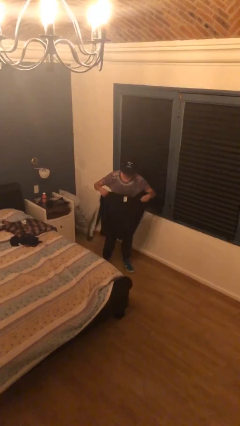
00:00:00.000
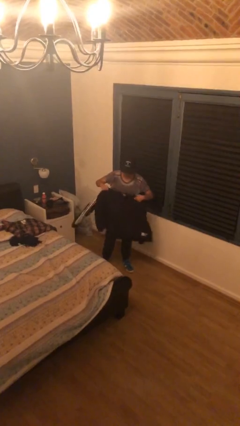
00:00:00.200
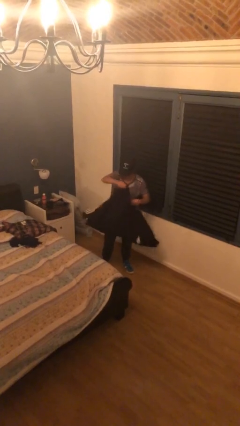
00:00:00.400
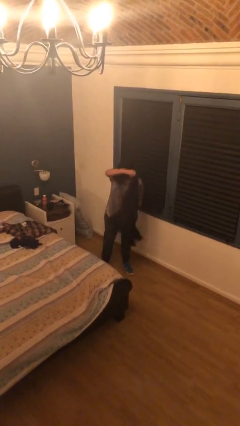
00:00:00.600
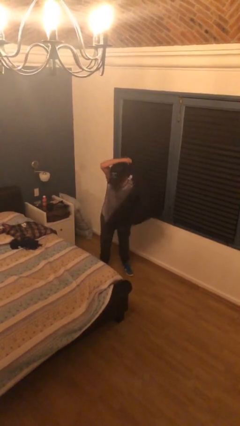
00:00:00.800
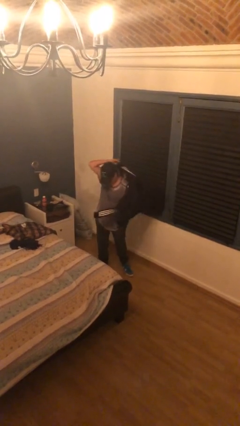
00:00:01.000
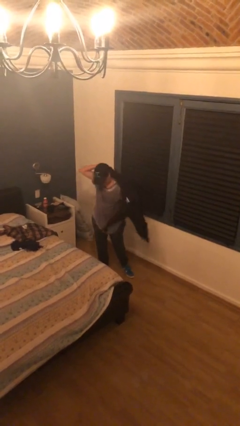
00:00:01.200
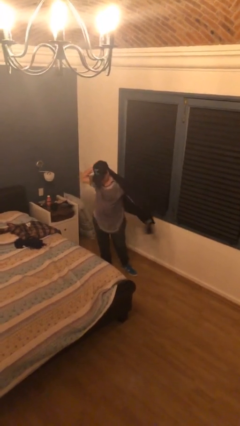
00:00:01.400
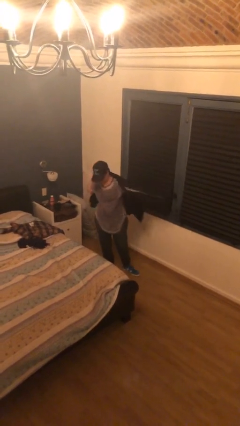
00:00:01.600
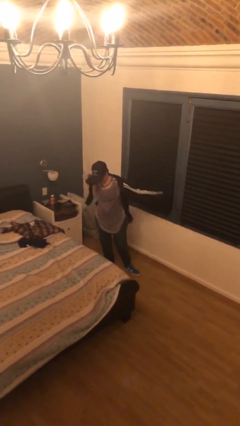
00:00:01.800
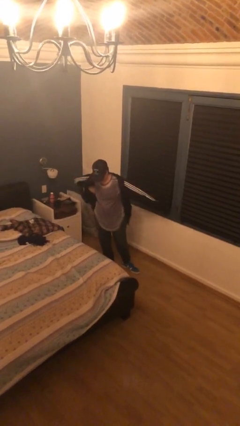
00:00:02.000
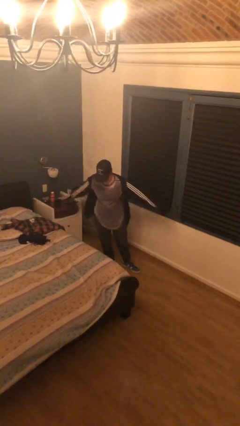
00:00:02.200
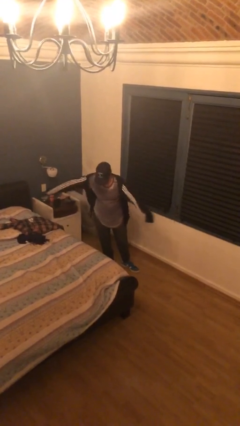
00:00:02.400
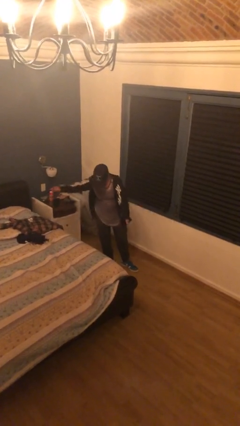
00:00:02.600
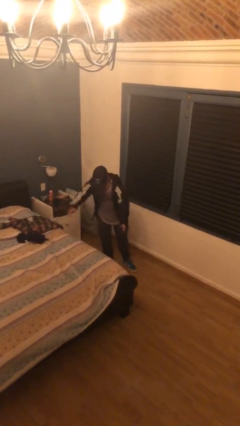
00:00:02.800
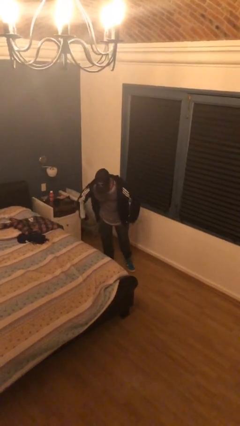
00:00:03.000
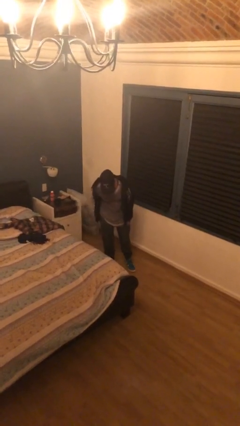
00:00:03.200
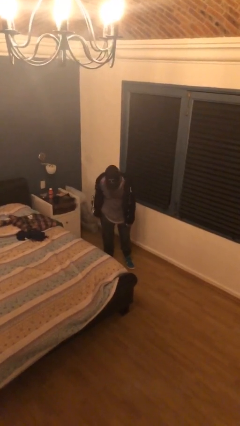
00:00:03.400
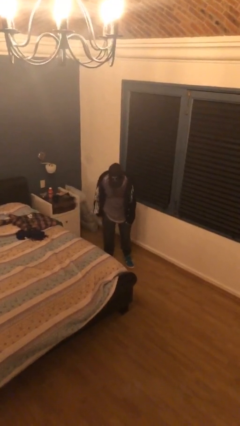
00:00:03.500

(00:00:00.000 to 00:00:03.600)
person puts on jacket

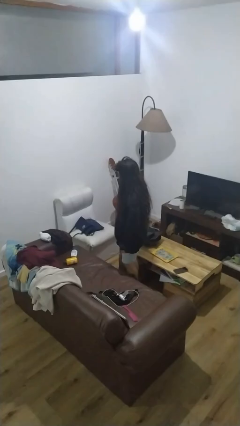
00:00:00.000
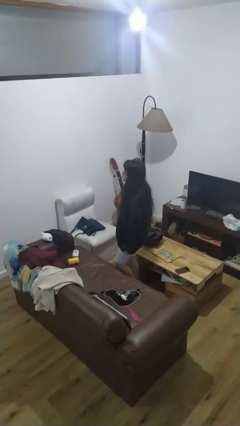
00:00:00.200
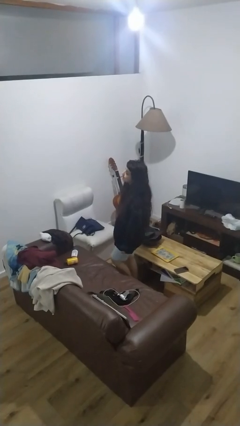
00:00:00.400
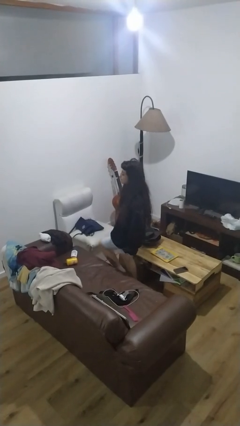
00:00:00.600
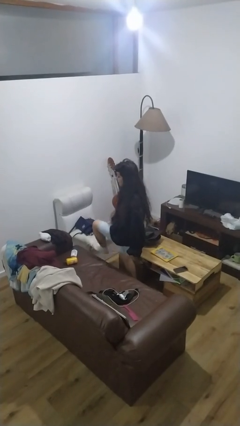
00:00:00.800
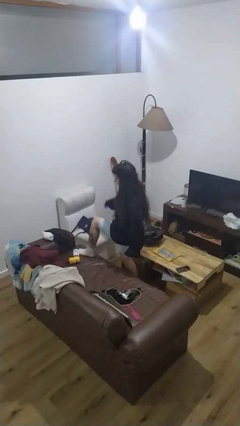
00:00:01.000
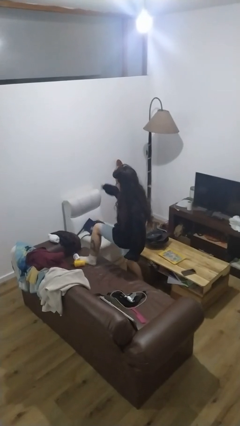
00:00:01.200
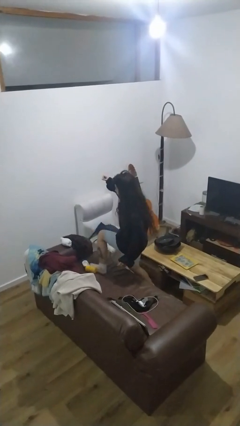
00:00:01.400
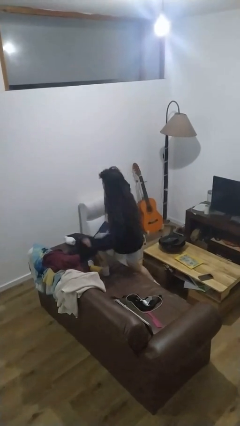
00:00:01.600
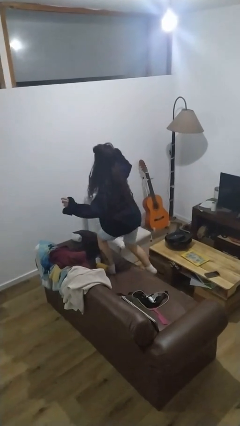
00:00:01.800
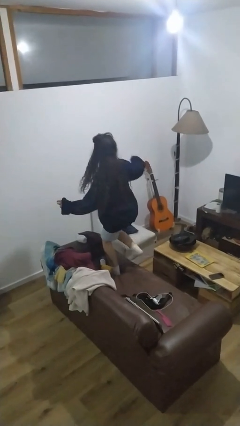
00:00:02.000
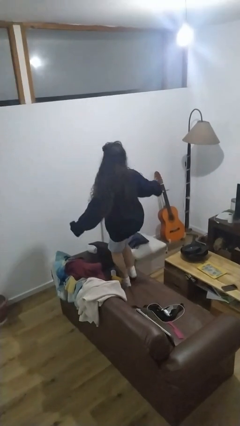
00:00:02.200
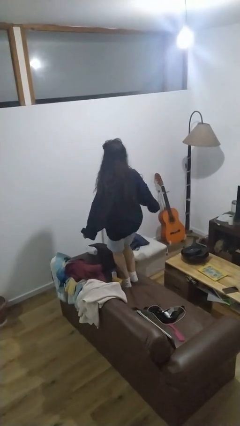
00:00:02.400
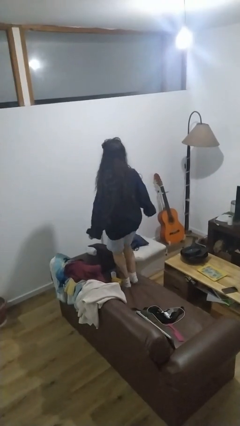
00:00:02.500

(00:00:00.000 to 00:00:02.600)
person climbs on couch

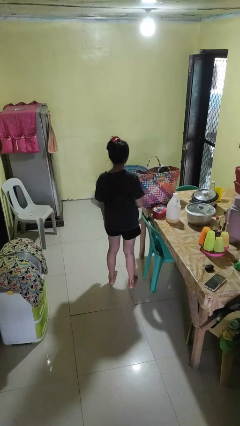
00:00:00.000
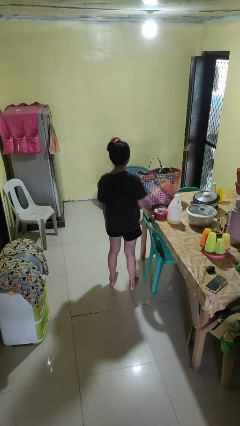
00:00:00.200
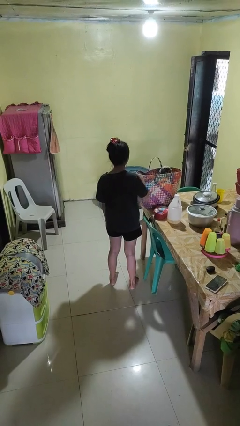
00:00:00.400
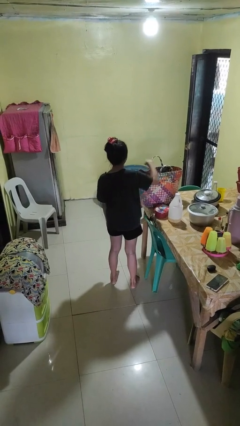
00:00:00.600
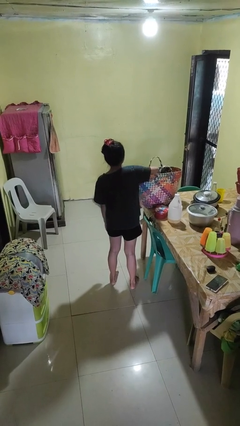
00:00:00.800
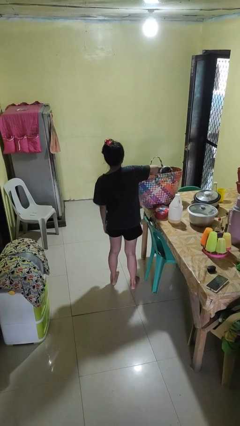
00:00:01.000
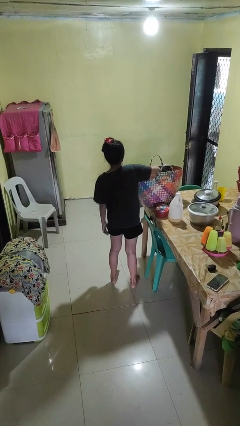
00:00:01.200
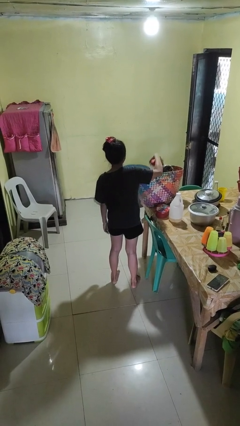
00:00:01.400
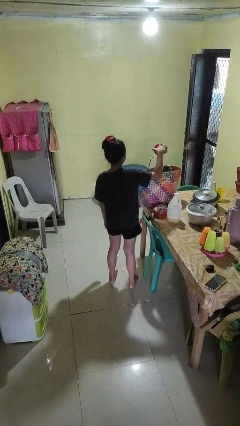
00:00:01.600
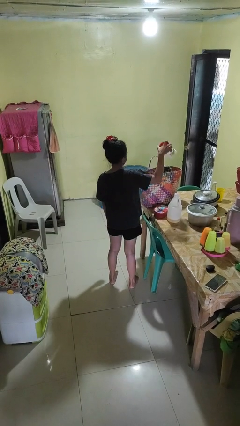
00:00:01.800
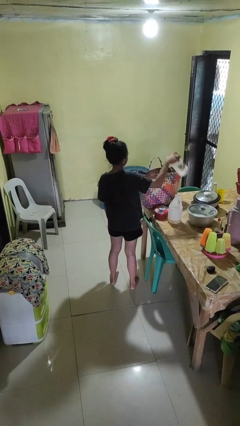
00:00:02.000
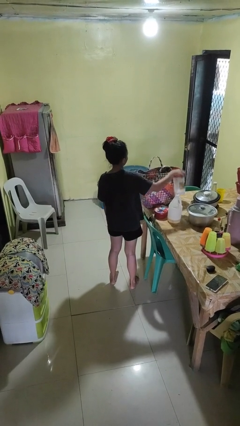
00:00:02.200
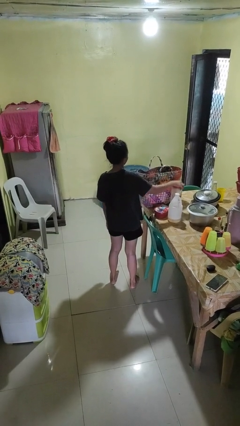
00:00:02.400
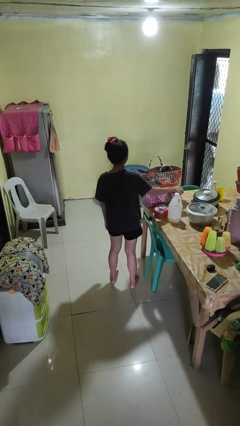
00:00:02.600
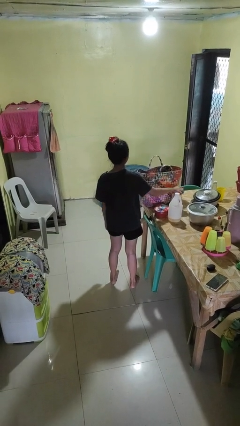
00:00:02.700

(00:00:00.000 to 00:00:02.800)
person takes object from basket

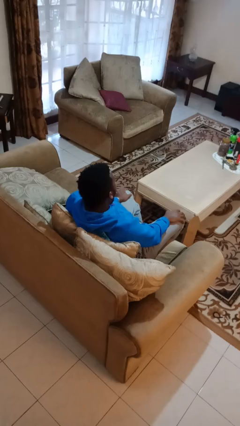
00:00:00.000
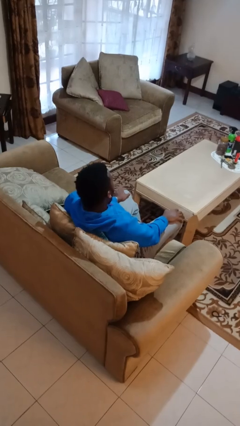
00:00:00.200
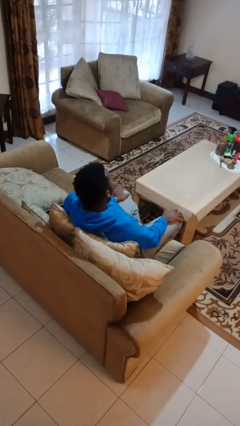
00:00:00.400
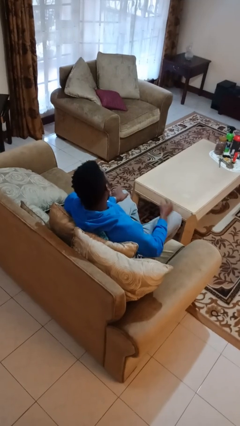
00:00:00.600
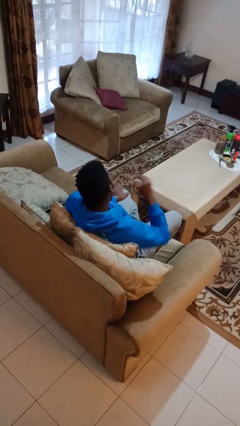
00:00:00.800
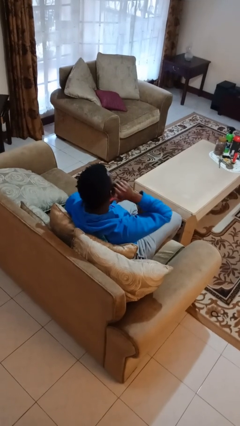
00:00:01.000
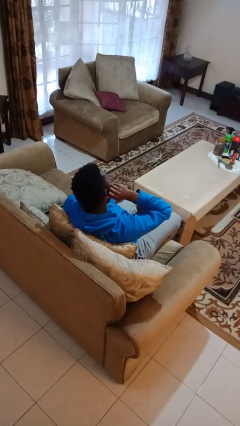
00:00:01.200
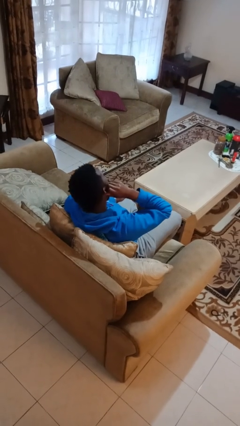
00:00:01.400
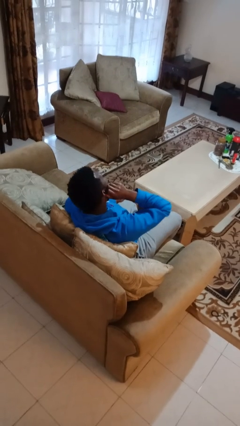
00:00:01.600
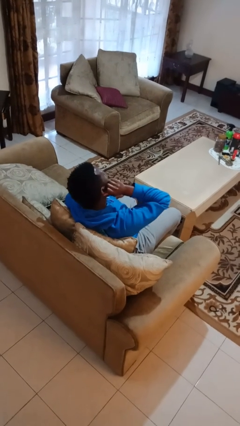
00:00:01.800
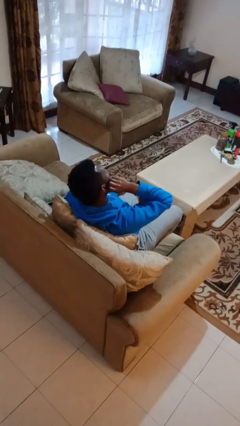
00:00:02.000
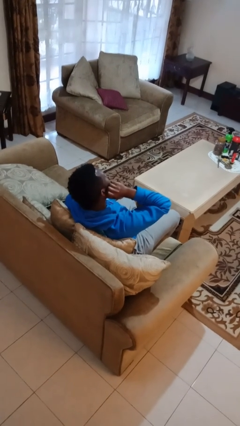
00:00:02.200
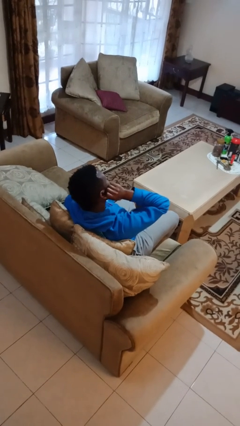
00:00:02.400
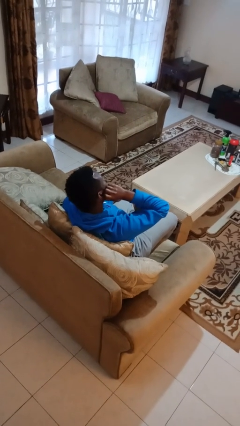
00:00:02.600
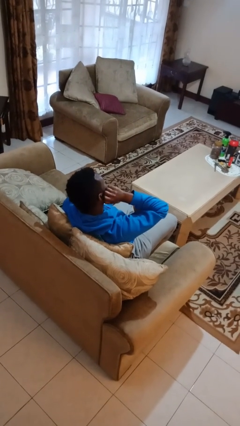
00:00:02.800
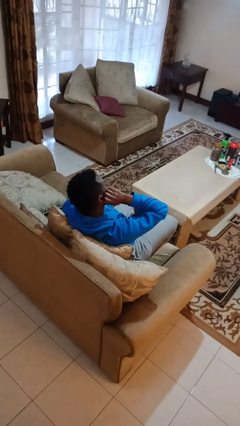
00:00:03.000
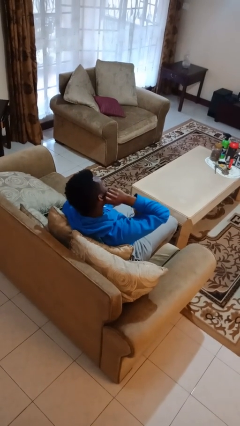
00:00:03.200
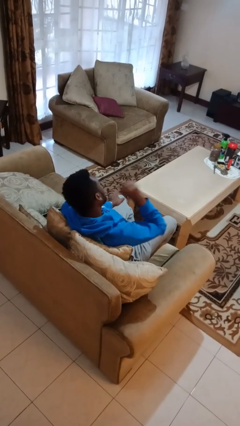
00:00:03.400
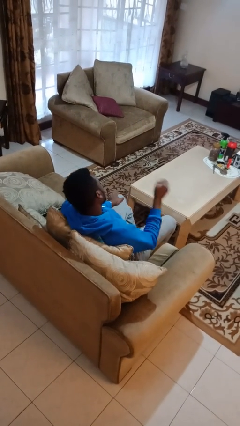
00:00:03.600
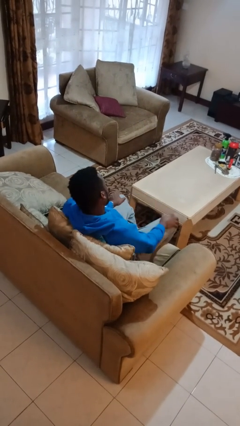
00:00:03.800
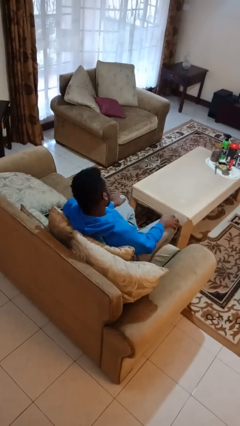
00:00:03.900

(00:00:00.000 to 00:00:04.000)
person touches earlobe

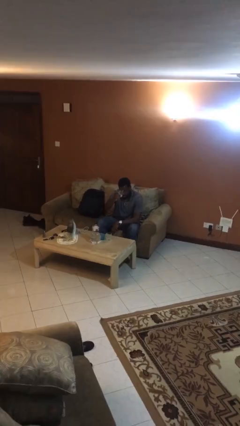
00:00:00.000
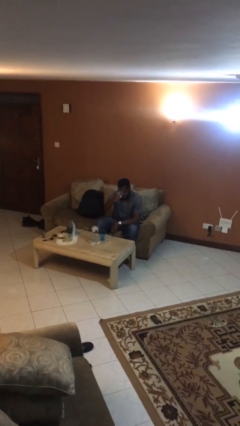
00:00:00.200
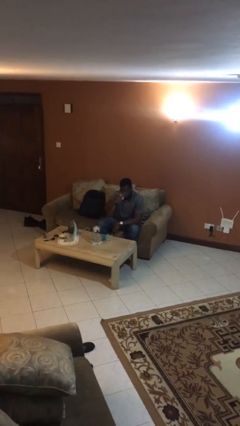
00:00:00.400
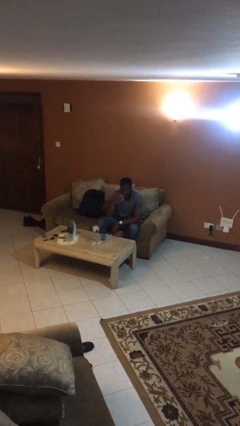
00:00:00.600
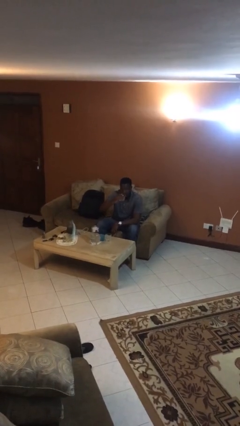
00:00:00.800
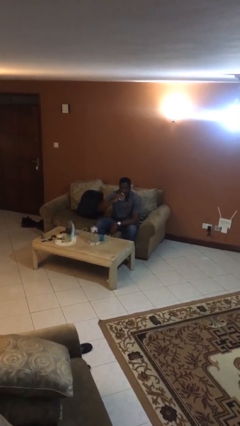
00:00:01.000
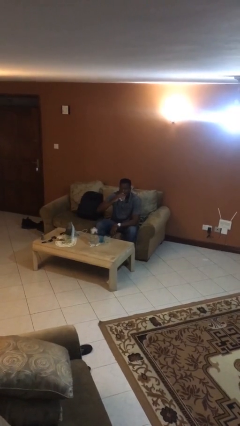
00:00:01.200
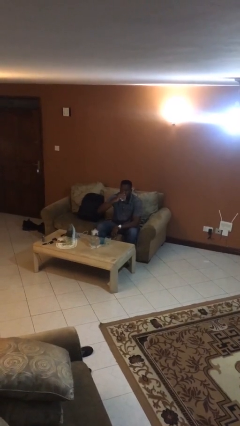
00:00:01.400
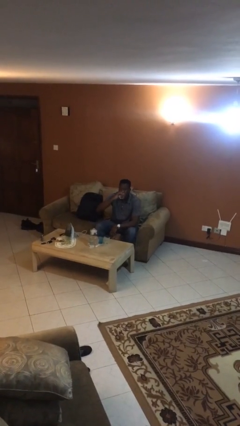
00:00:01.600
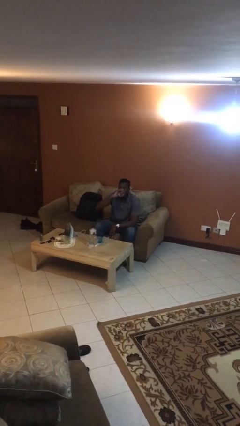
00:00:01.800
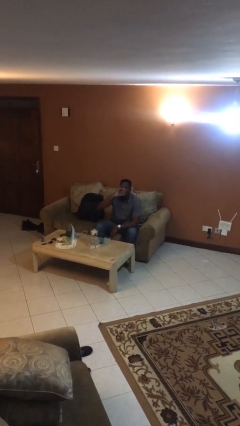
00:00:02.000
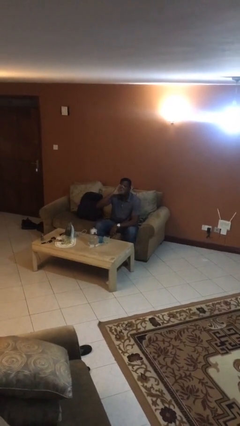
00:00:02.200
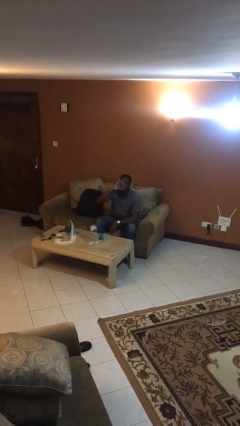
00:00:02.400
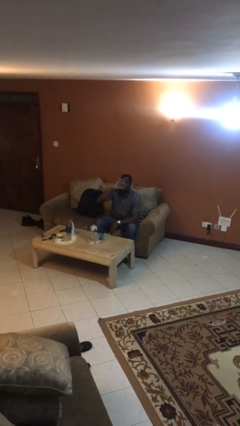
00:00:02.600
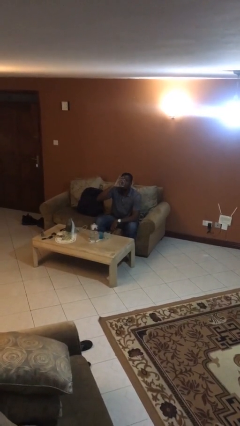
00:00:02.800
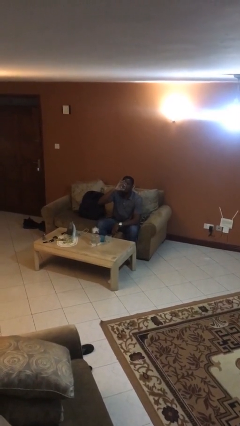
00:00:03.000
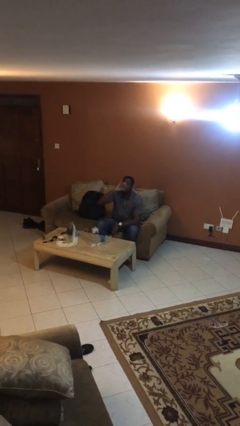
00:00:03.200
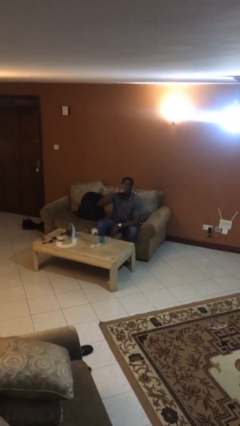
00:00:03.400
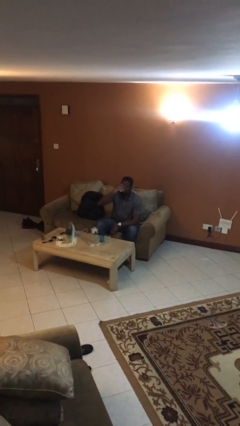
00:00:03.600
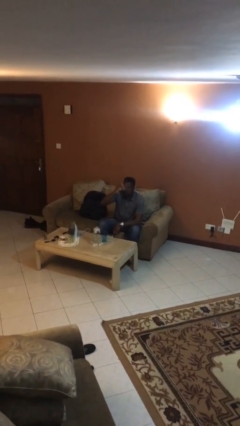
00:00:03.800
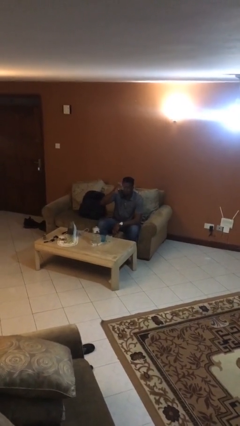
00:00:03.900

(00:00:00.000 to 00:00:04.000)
person drinks from shotglass

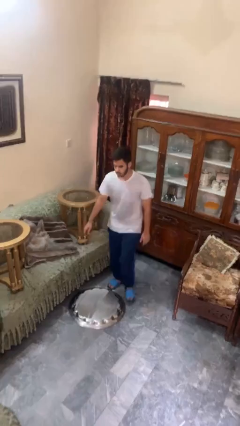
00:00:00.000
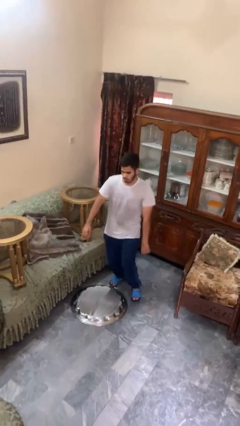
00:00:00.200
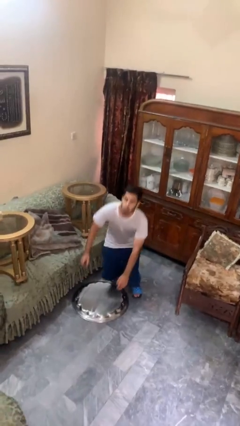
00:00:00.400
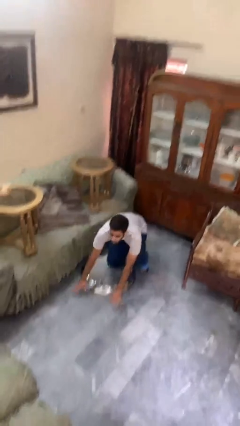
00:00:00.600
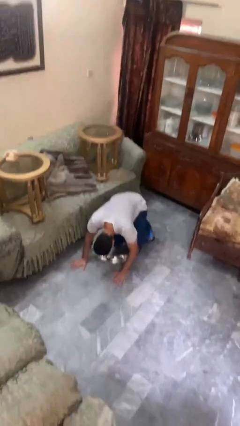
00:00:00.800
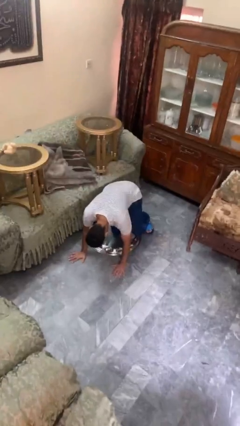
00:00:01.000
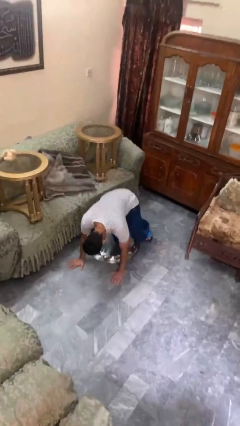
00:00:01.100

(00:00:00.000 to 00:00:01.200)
person trips on object on floor
